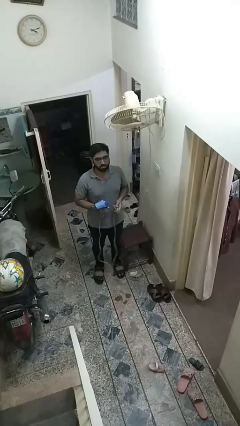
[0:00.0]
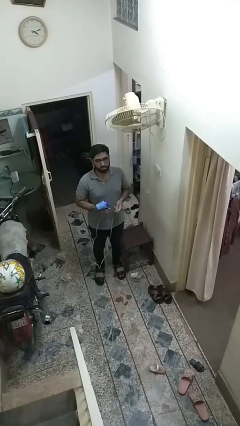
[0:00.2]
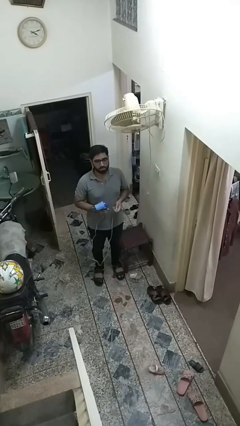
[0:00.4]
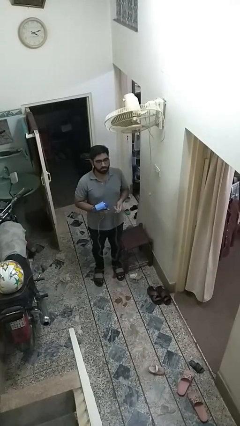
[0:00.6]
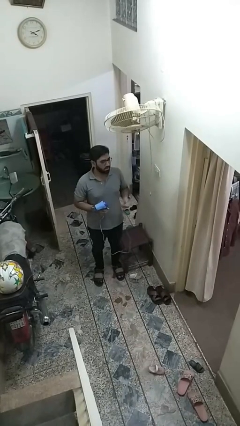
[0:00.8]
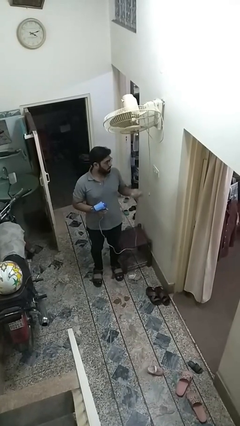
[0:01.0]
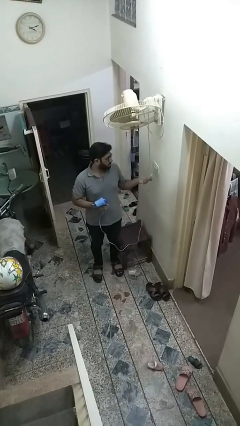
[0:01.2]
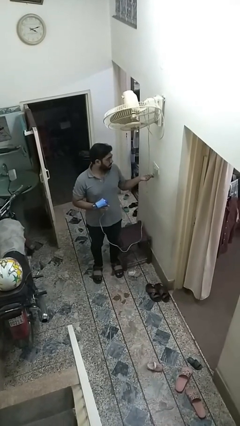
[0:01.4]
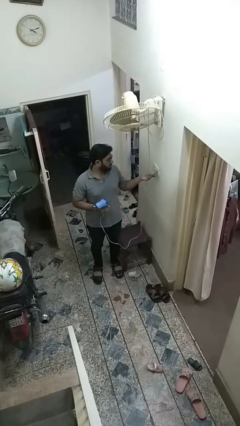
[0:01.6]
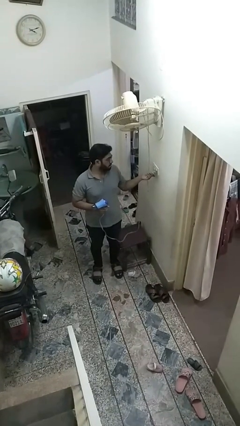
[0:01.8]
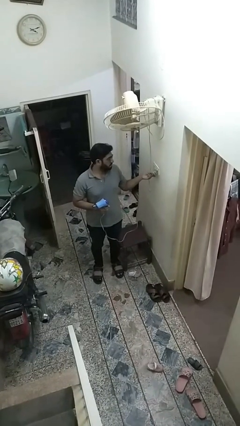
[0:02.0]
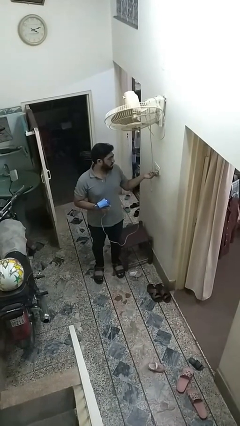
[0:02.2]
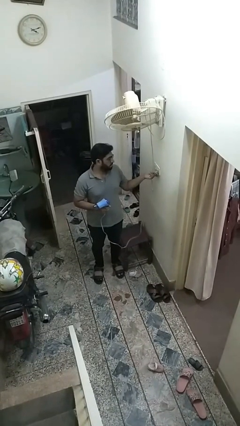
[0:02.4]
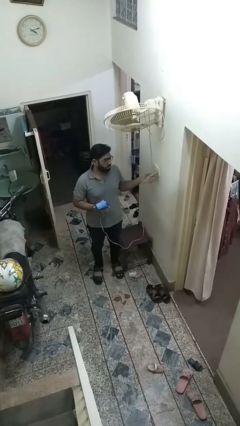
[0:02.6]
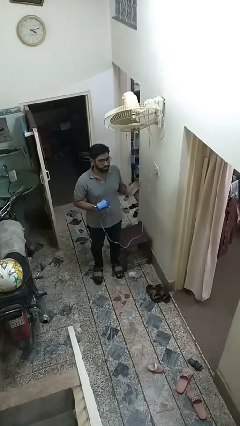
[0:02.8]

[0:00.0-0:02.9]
person plugs into electrical socket

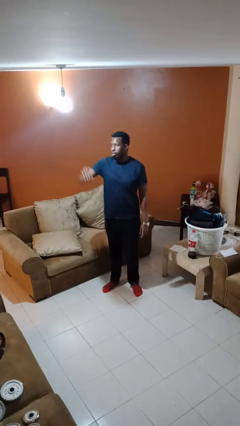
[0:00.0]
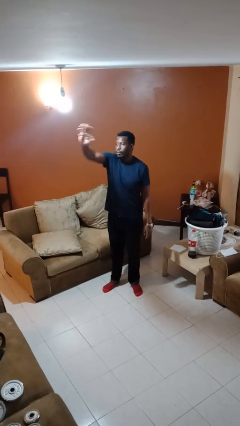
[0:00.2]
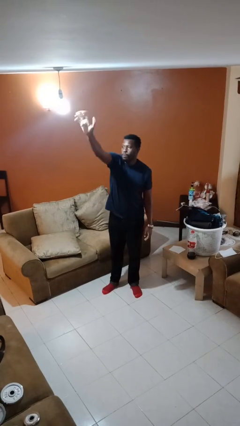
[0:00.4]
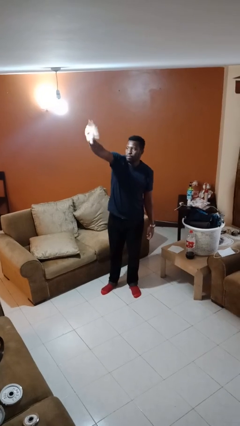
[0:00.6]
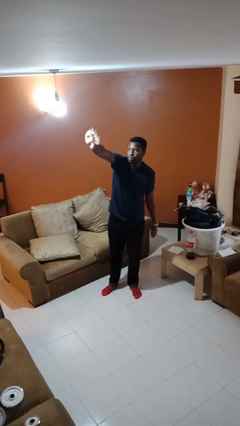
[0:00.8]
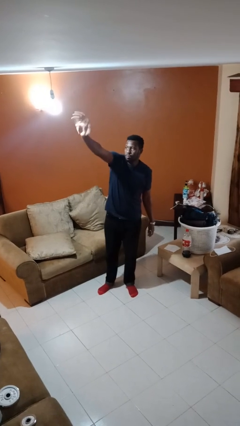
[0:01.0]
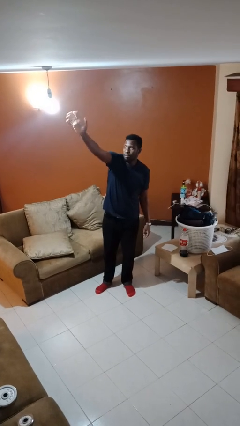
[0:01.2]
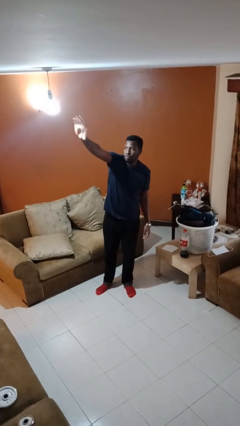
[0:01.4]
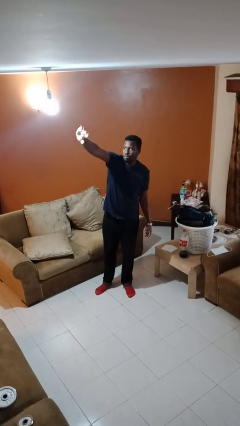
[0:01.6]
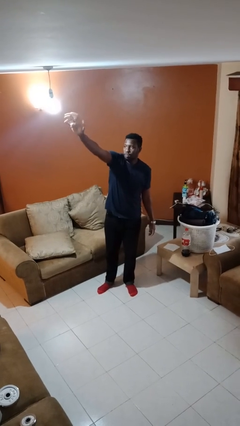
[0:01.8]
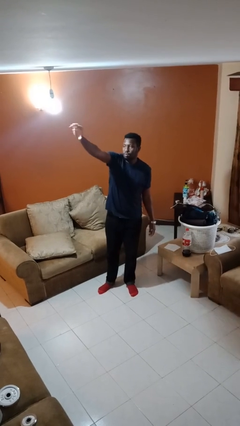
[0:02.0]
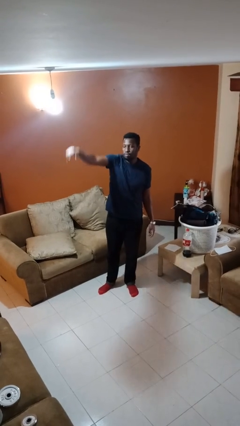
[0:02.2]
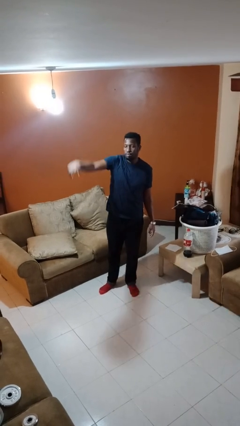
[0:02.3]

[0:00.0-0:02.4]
person waves at person

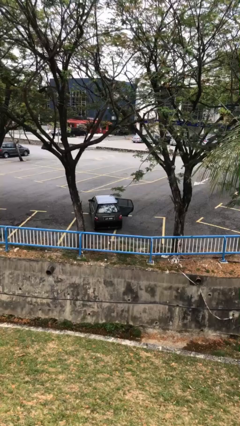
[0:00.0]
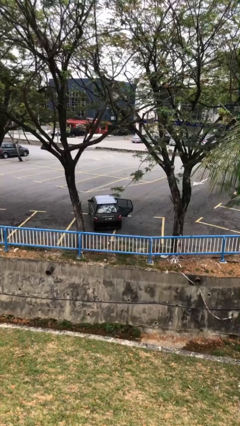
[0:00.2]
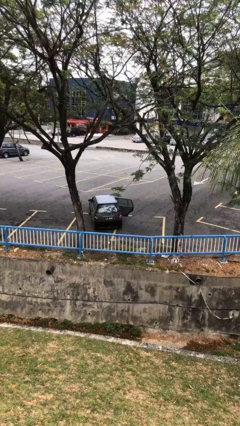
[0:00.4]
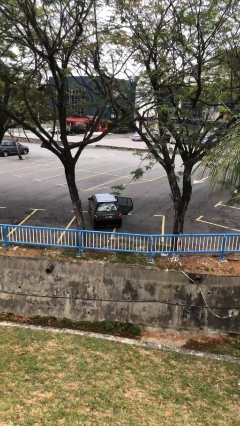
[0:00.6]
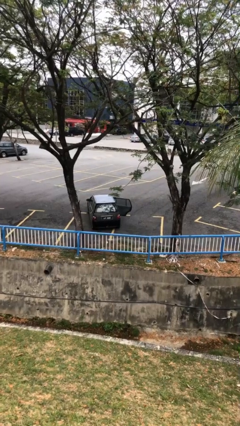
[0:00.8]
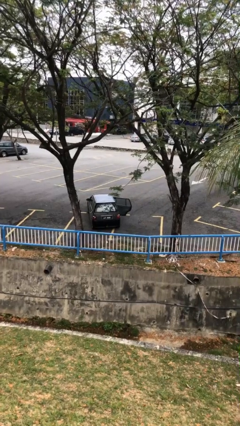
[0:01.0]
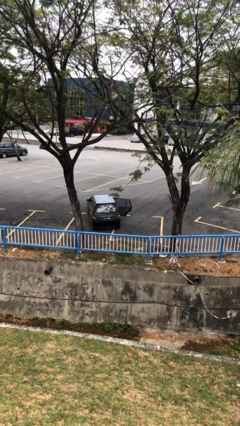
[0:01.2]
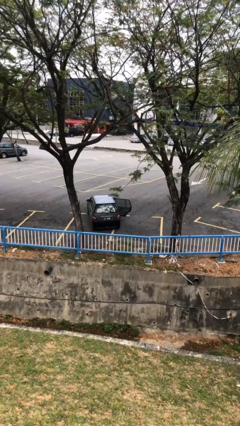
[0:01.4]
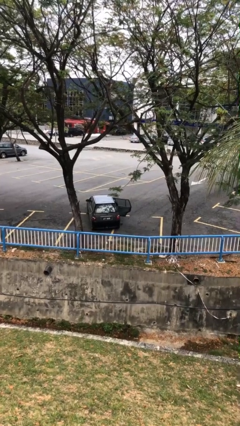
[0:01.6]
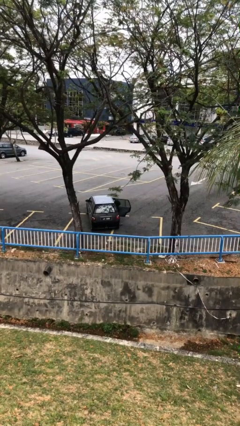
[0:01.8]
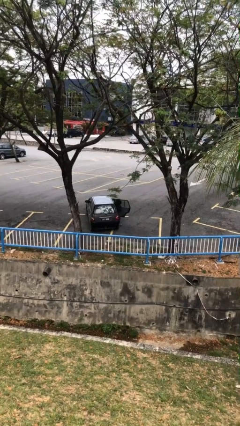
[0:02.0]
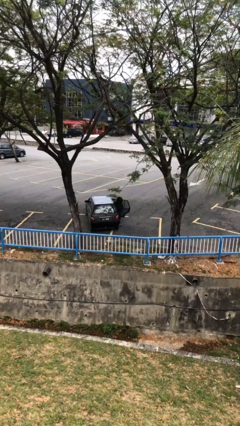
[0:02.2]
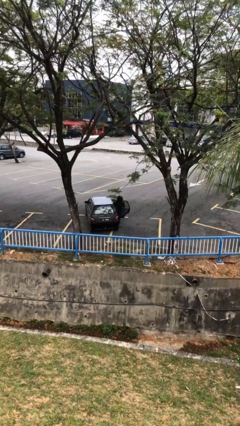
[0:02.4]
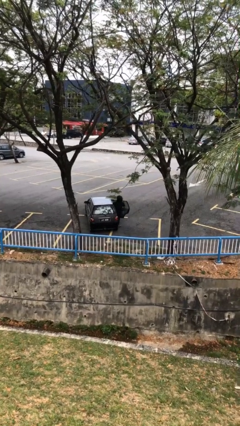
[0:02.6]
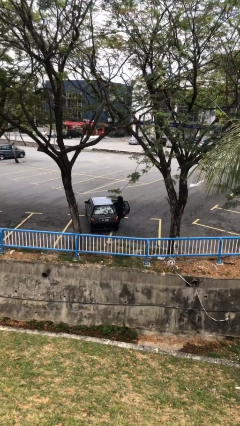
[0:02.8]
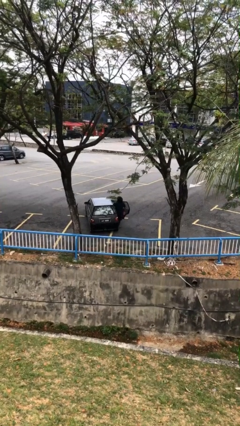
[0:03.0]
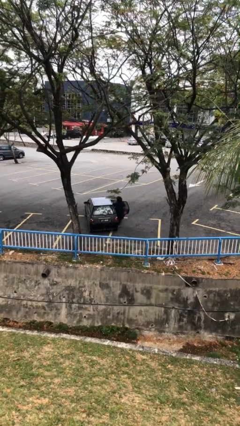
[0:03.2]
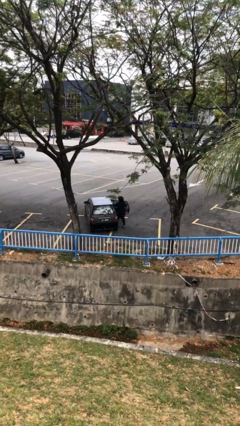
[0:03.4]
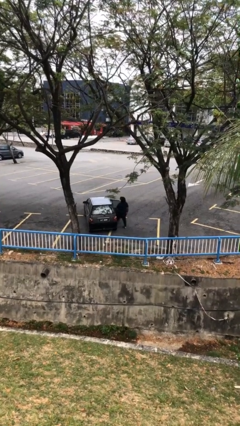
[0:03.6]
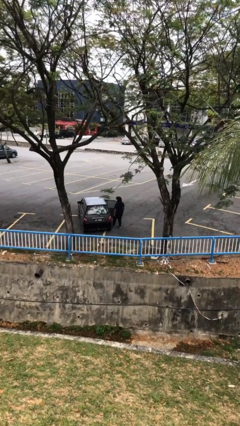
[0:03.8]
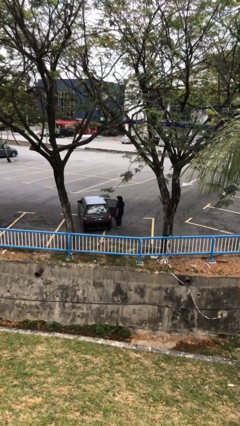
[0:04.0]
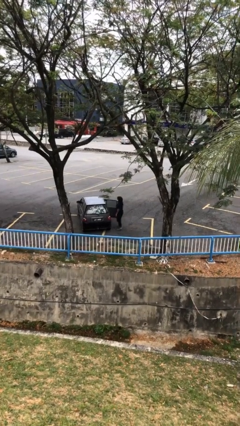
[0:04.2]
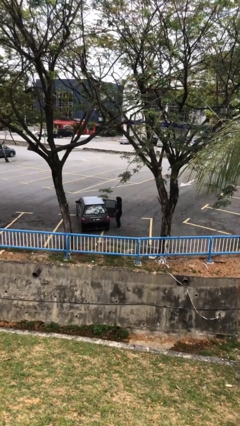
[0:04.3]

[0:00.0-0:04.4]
person exits car

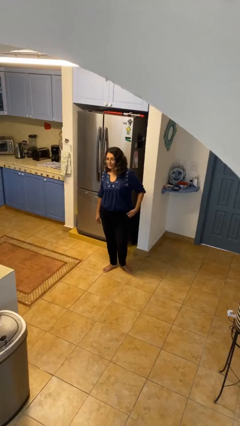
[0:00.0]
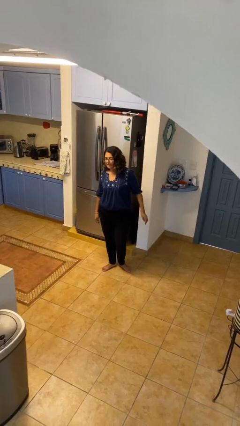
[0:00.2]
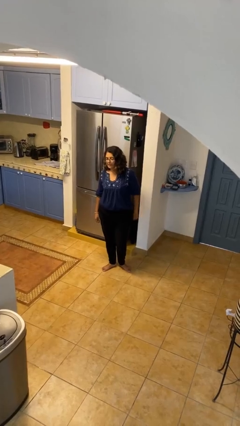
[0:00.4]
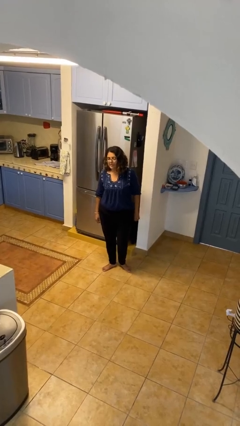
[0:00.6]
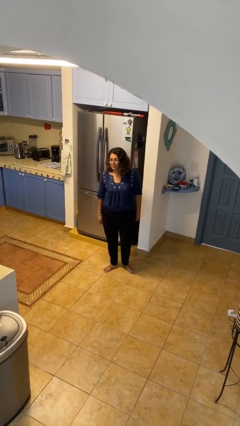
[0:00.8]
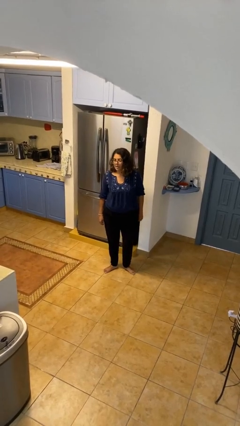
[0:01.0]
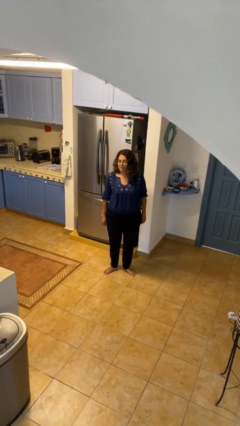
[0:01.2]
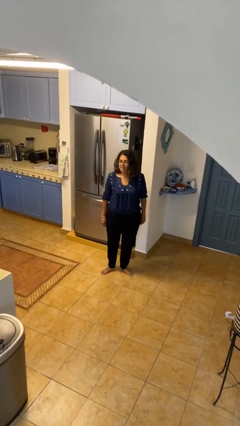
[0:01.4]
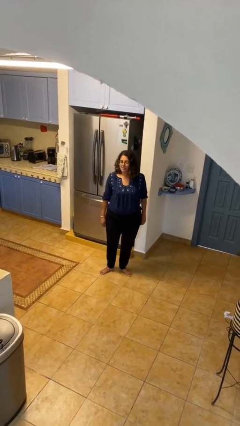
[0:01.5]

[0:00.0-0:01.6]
person puts hands in back pockets

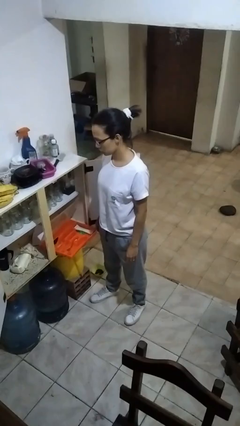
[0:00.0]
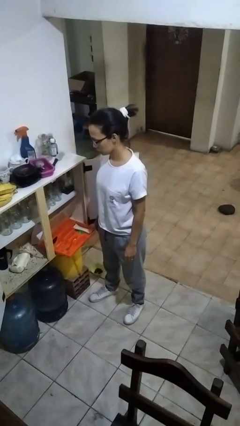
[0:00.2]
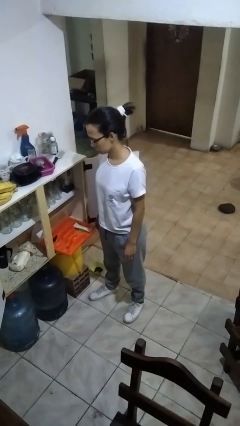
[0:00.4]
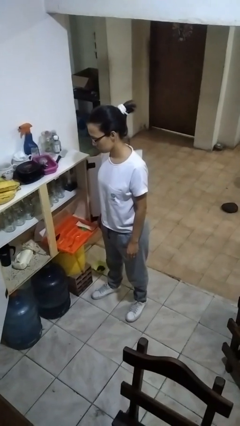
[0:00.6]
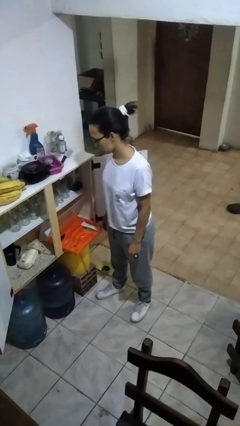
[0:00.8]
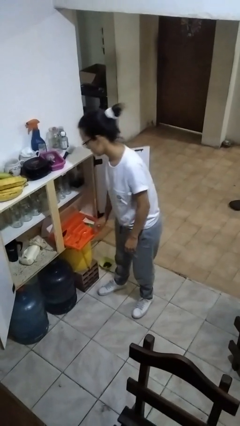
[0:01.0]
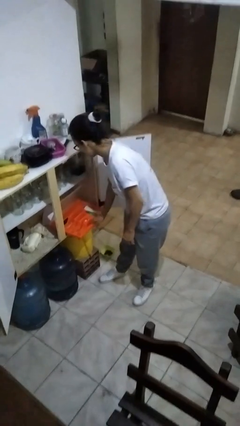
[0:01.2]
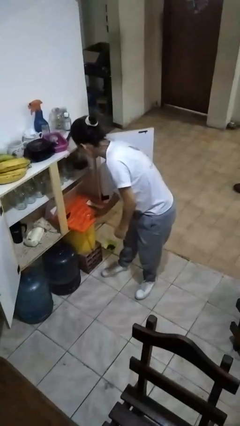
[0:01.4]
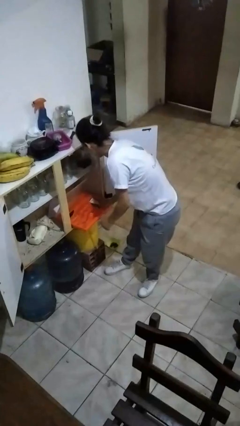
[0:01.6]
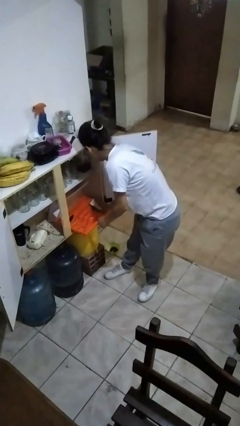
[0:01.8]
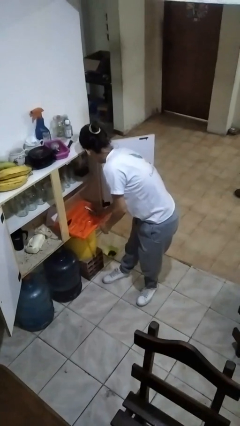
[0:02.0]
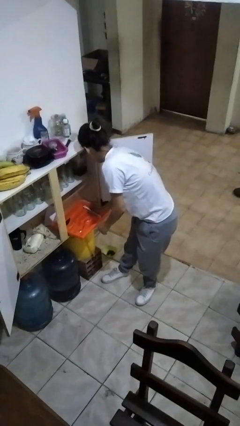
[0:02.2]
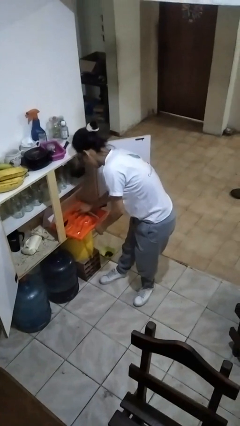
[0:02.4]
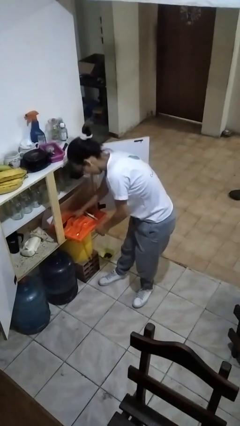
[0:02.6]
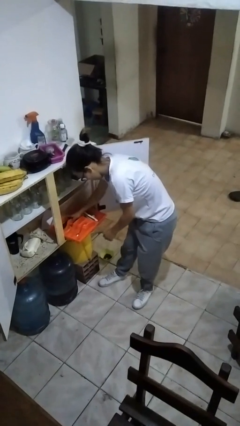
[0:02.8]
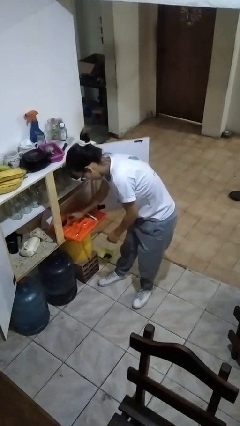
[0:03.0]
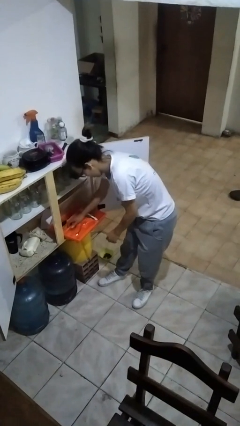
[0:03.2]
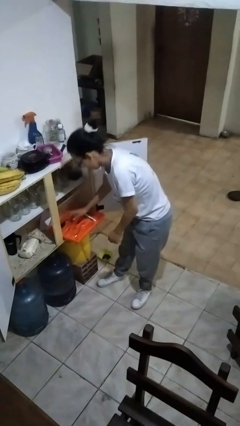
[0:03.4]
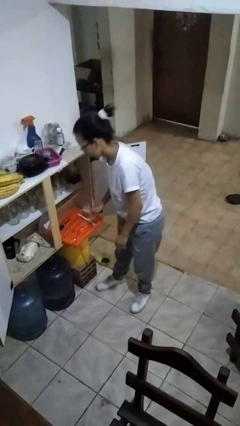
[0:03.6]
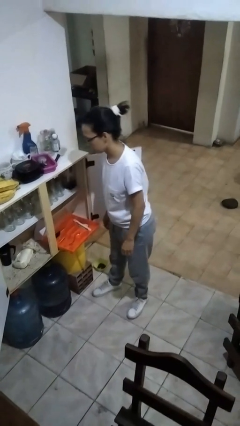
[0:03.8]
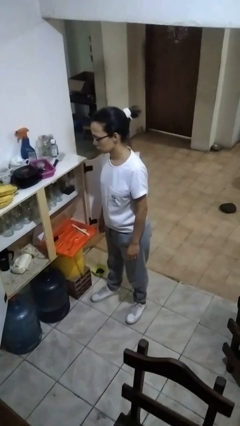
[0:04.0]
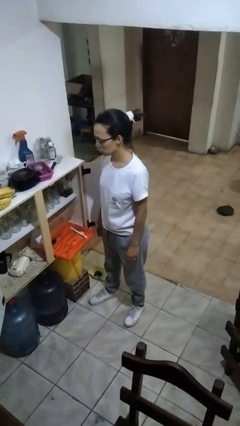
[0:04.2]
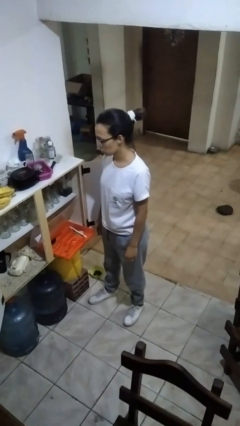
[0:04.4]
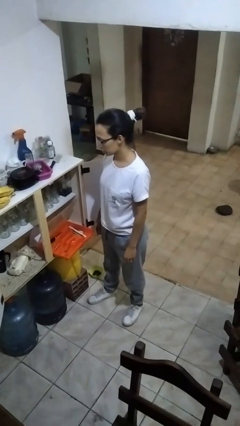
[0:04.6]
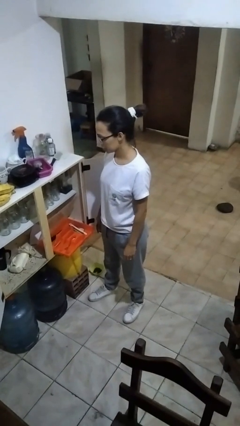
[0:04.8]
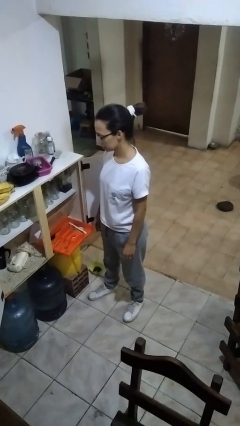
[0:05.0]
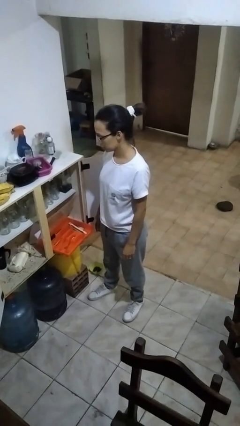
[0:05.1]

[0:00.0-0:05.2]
person searches in kitchen drawer

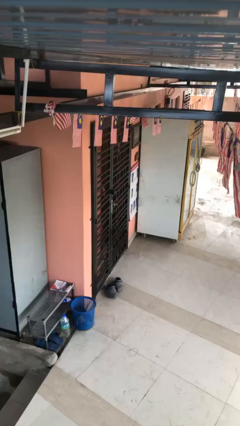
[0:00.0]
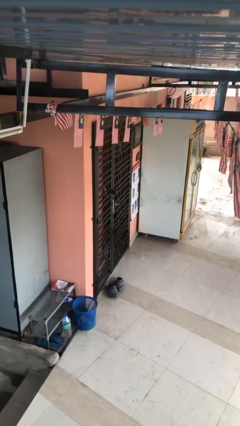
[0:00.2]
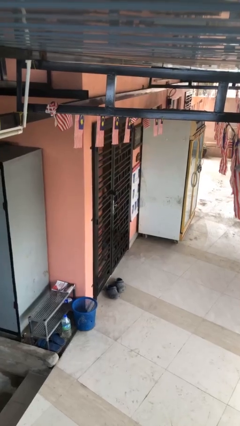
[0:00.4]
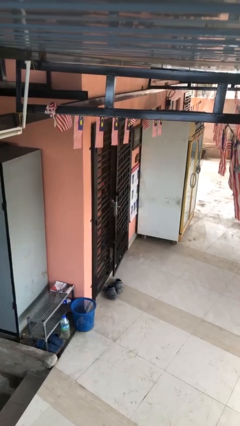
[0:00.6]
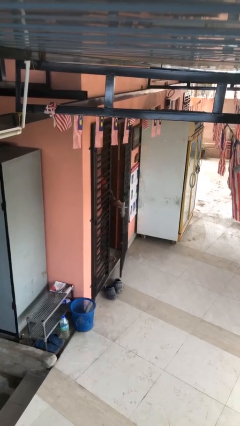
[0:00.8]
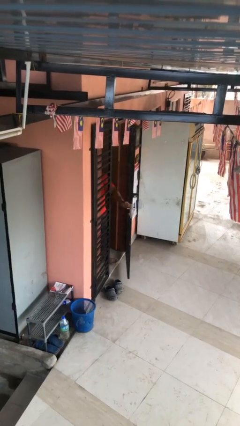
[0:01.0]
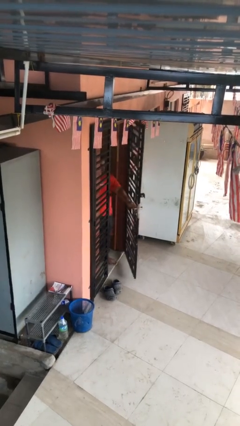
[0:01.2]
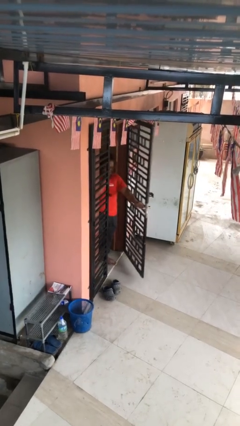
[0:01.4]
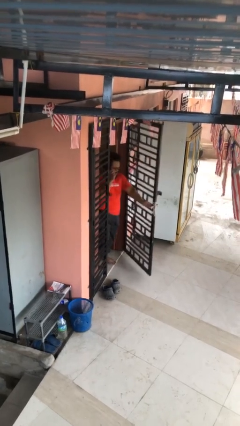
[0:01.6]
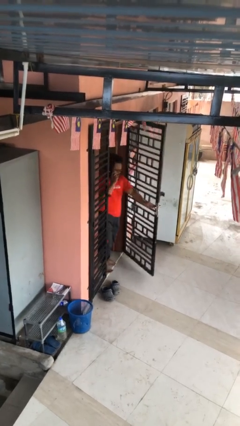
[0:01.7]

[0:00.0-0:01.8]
person opens facility door
